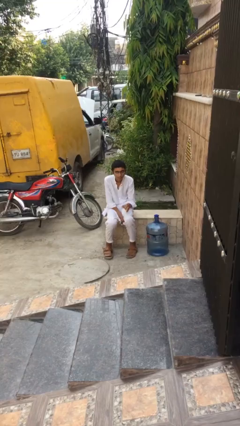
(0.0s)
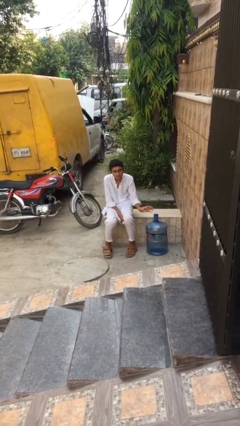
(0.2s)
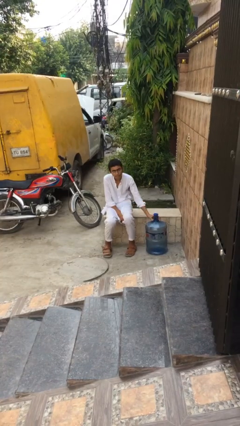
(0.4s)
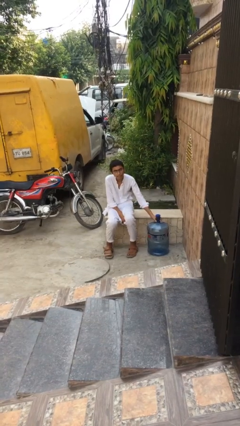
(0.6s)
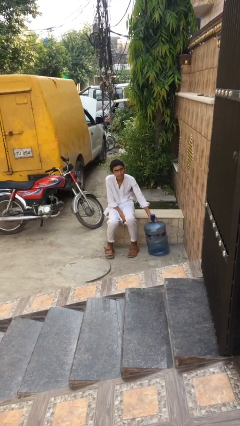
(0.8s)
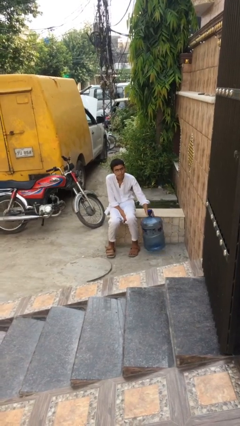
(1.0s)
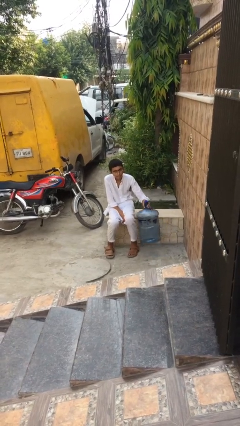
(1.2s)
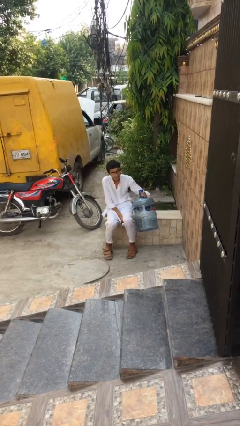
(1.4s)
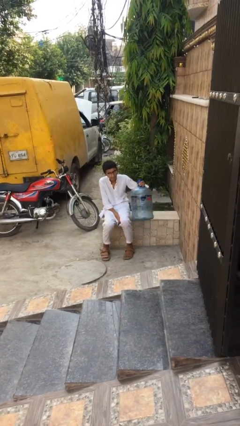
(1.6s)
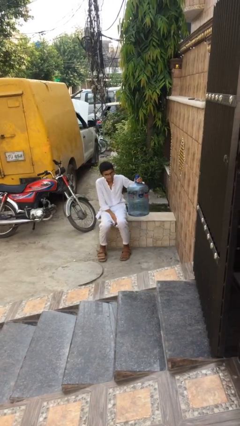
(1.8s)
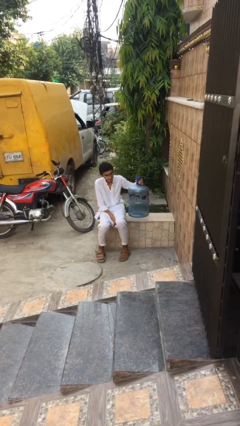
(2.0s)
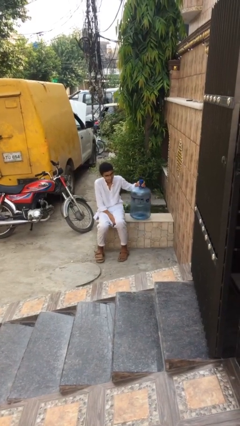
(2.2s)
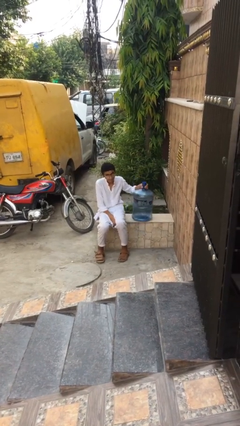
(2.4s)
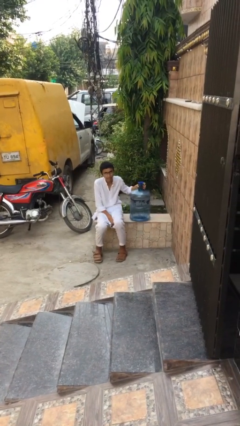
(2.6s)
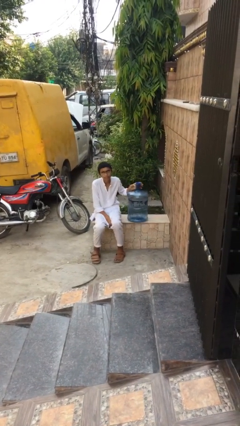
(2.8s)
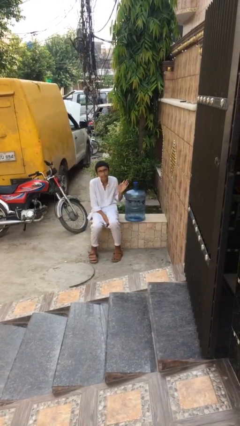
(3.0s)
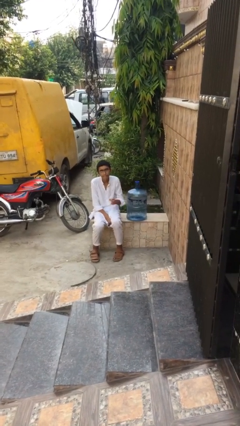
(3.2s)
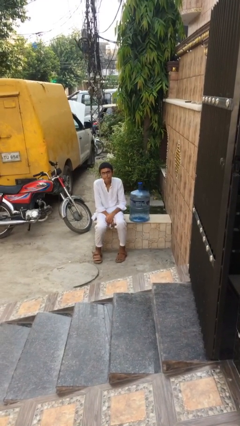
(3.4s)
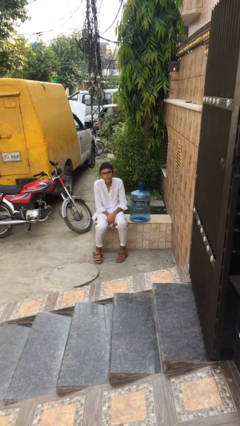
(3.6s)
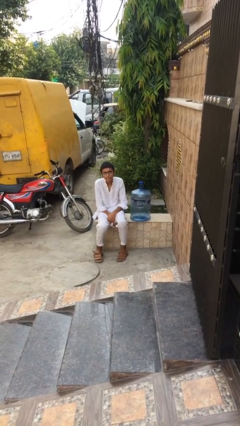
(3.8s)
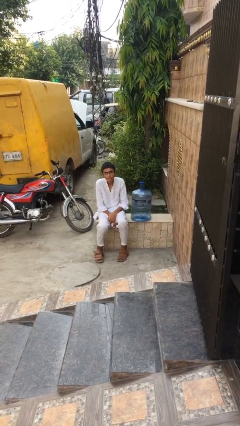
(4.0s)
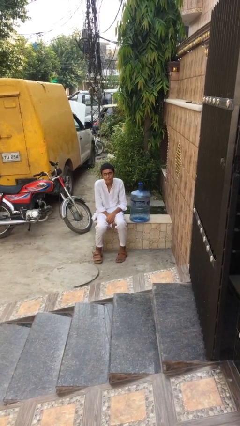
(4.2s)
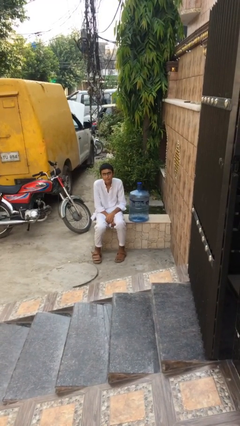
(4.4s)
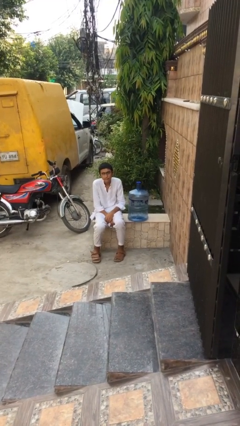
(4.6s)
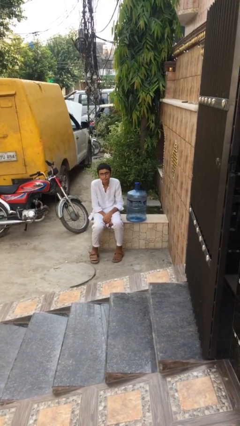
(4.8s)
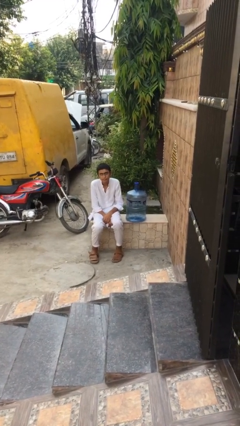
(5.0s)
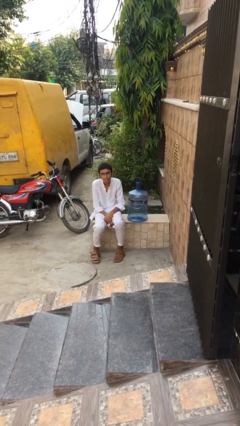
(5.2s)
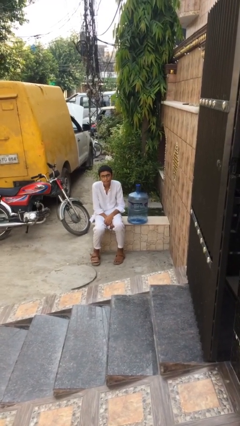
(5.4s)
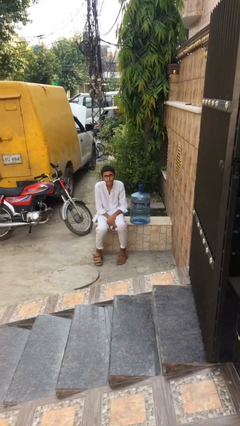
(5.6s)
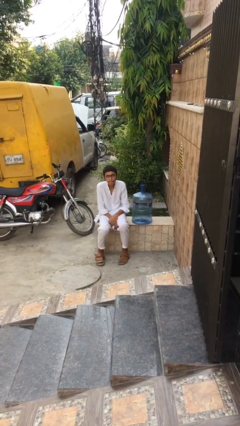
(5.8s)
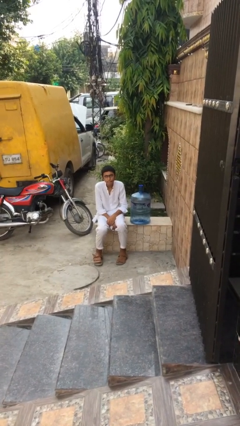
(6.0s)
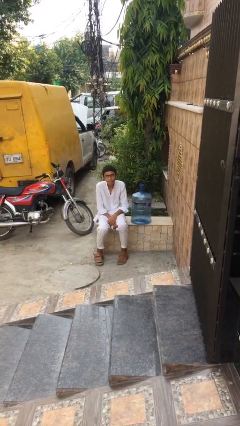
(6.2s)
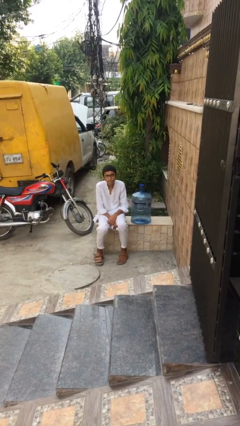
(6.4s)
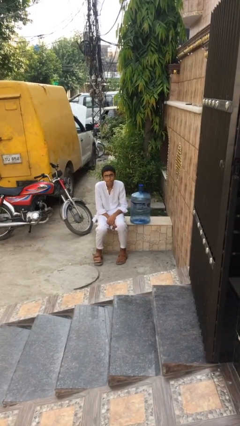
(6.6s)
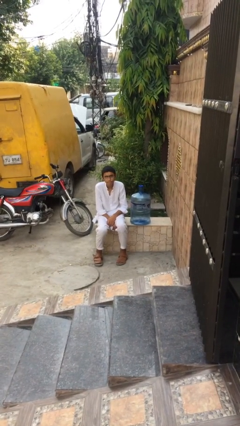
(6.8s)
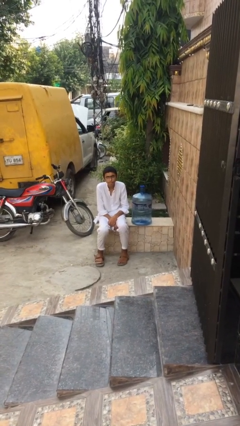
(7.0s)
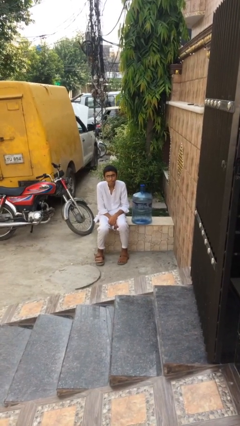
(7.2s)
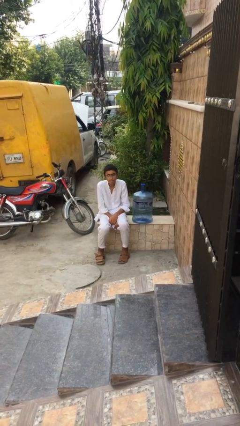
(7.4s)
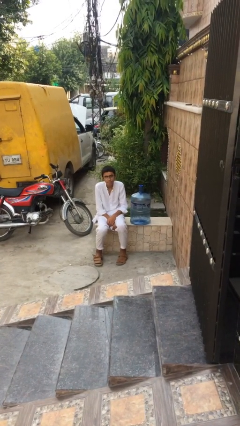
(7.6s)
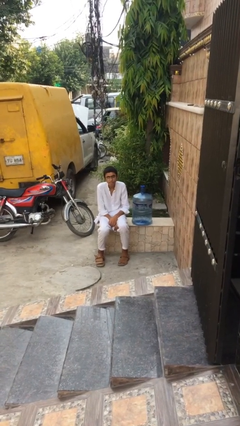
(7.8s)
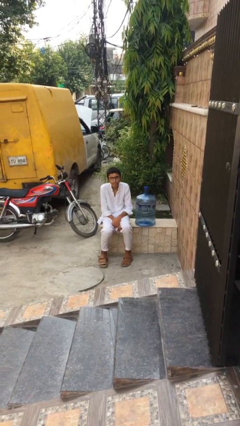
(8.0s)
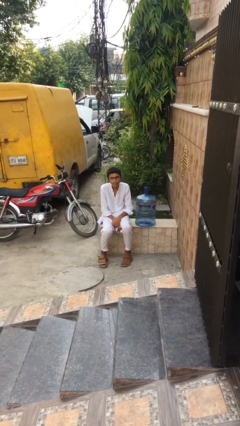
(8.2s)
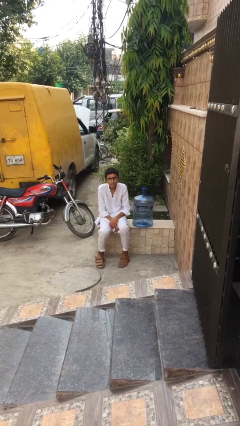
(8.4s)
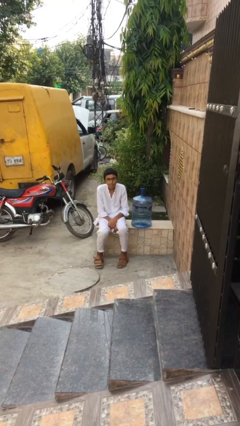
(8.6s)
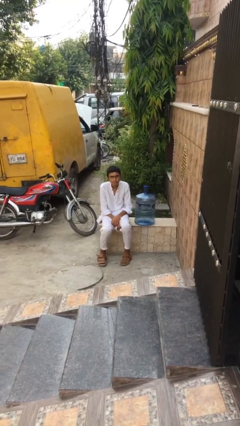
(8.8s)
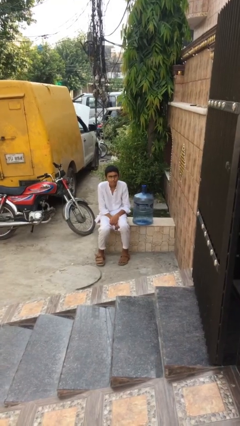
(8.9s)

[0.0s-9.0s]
person picks up object from floor

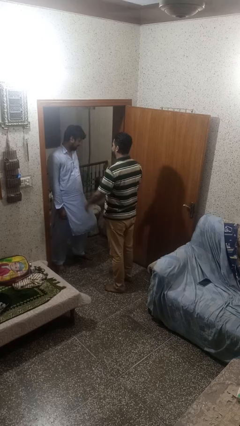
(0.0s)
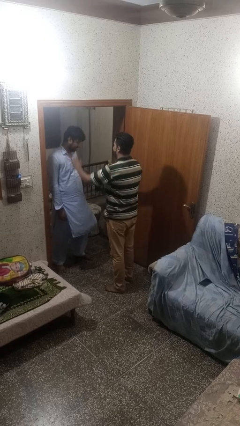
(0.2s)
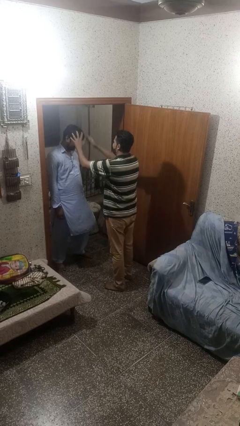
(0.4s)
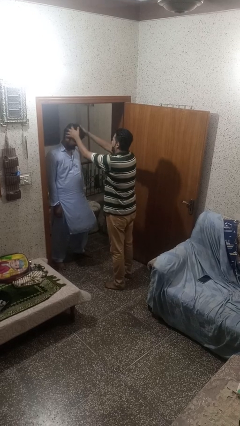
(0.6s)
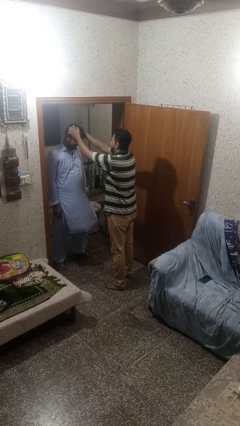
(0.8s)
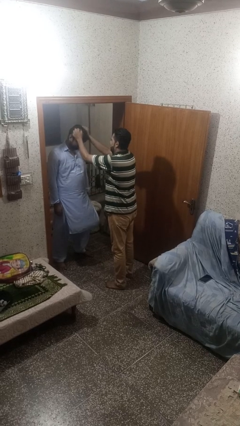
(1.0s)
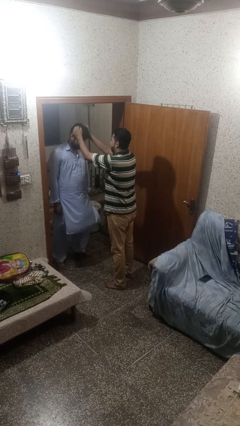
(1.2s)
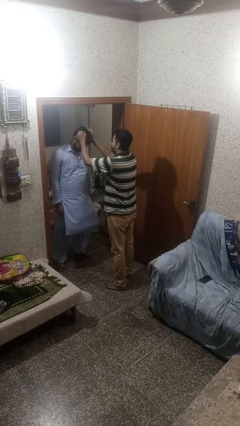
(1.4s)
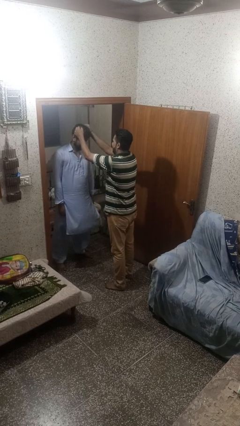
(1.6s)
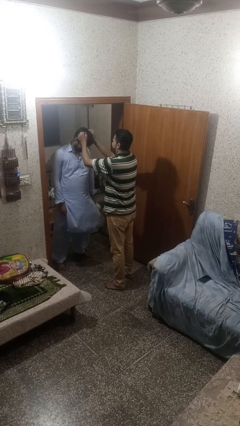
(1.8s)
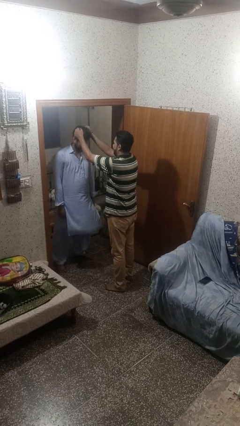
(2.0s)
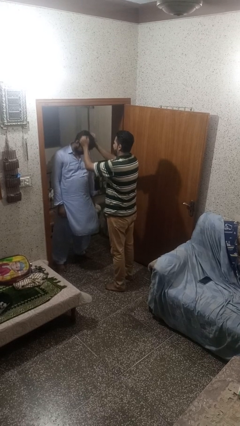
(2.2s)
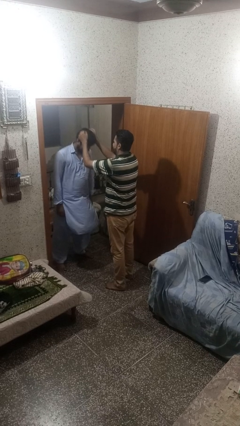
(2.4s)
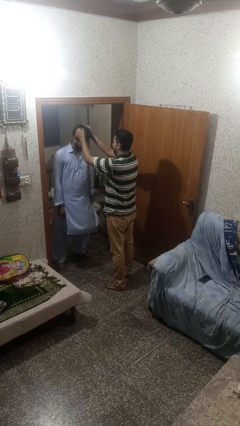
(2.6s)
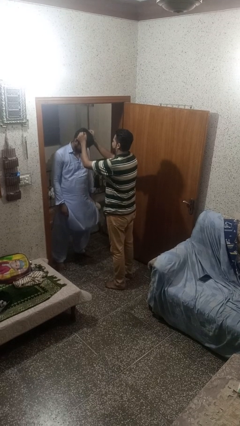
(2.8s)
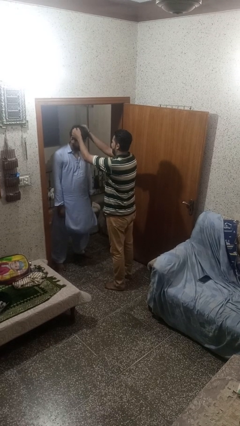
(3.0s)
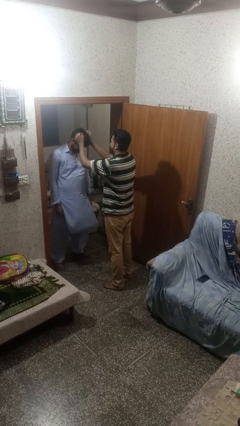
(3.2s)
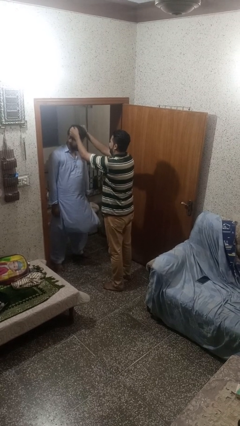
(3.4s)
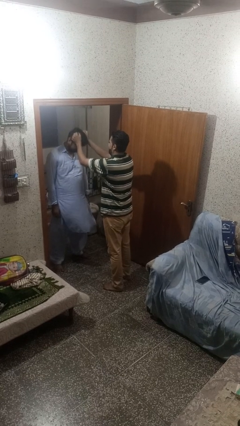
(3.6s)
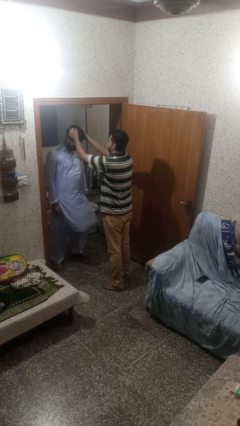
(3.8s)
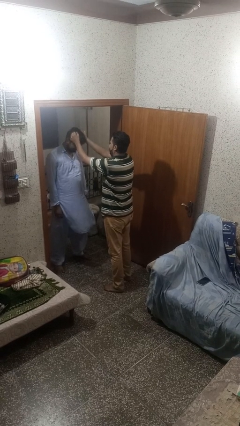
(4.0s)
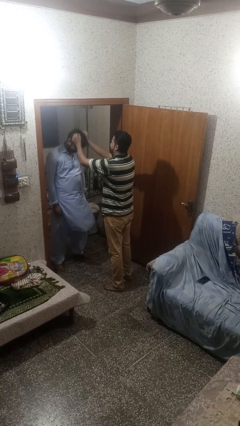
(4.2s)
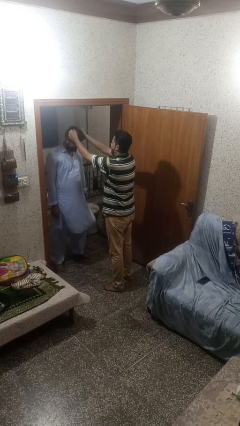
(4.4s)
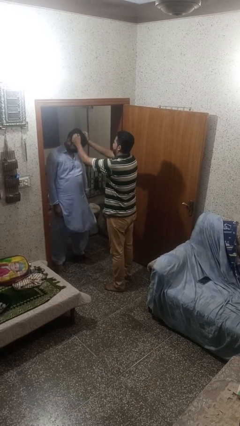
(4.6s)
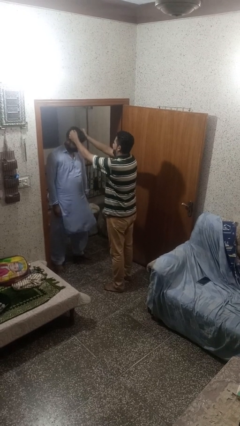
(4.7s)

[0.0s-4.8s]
person grabs person by hair

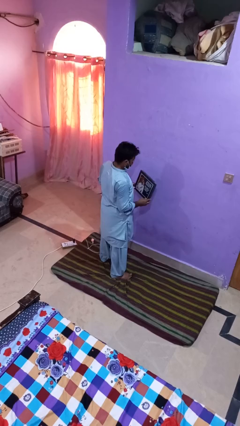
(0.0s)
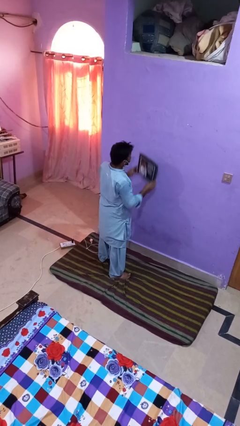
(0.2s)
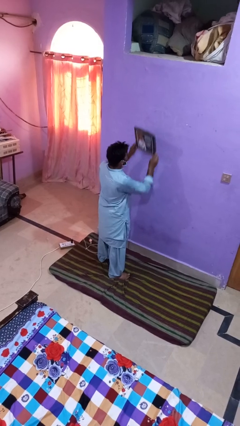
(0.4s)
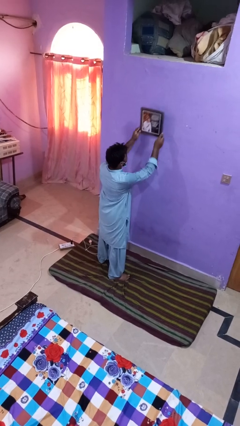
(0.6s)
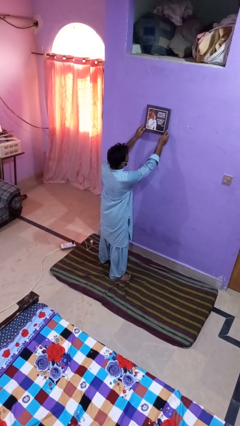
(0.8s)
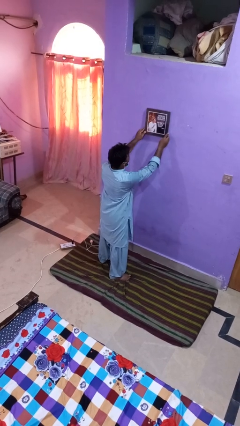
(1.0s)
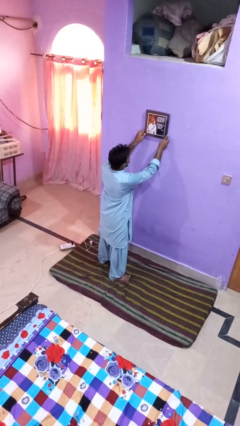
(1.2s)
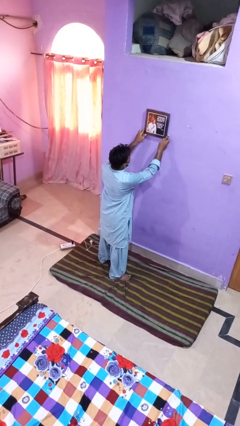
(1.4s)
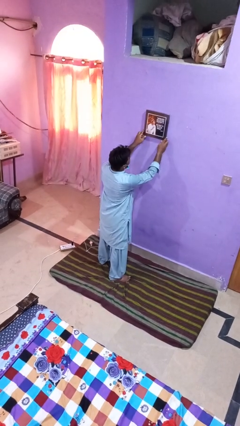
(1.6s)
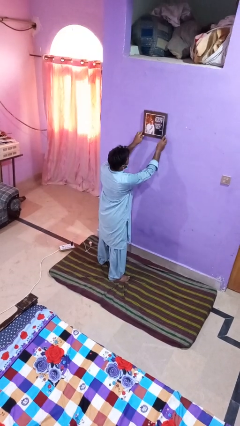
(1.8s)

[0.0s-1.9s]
person puts up picture frame

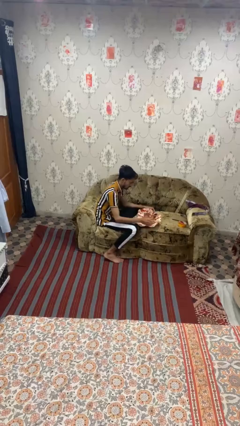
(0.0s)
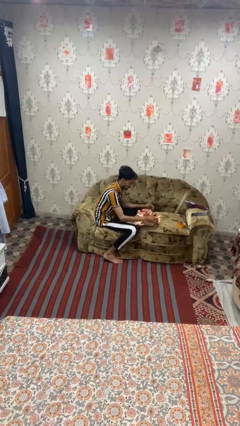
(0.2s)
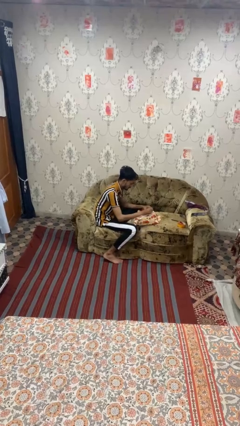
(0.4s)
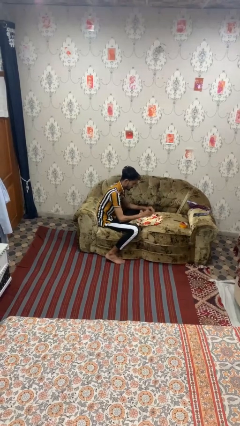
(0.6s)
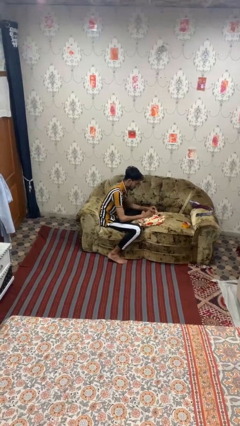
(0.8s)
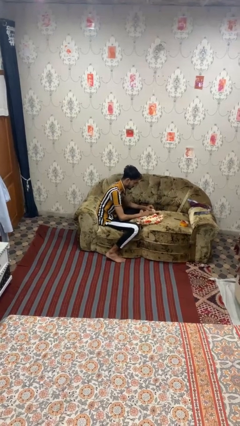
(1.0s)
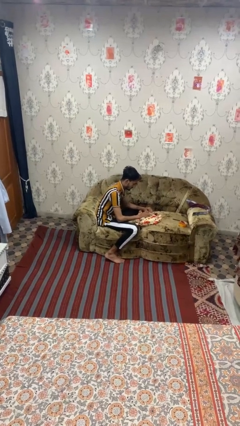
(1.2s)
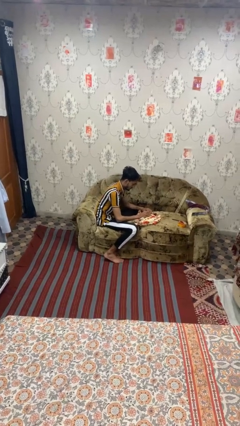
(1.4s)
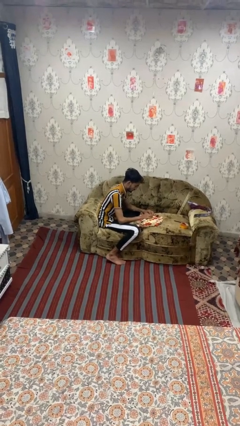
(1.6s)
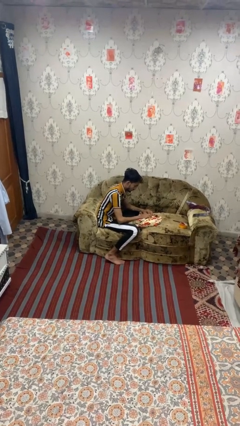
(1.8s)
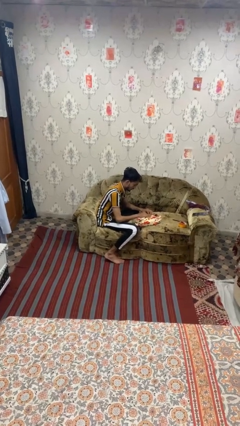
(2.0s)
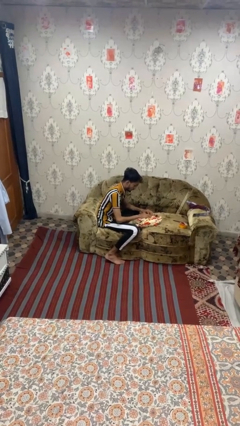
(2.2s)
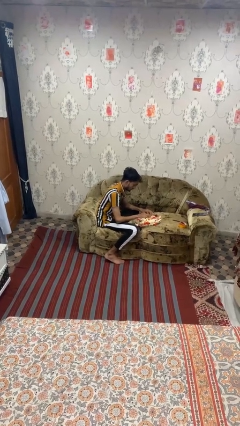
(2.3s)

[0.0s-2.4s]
person wraps box
